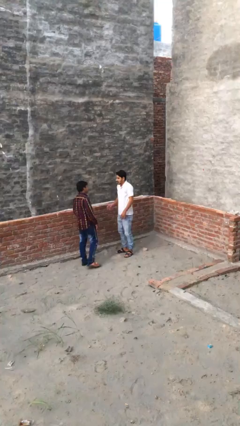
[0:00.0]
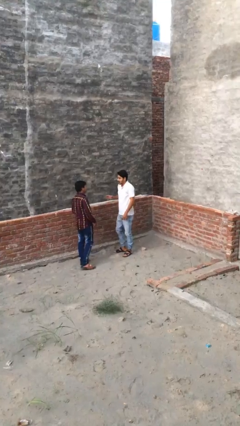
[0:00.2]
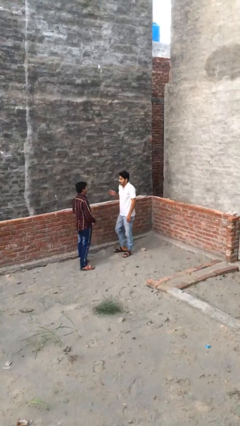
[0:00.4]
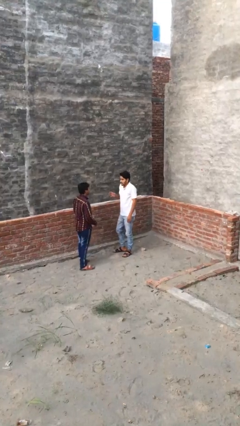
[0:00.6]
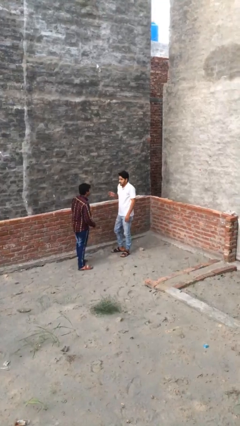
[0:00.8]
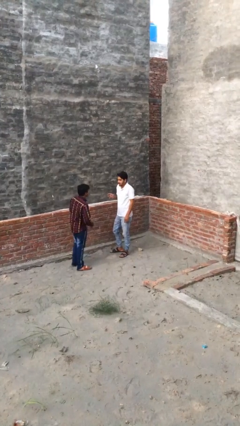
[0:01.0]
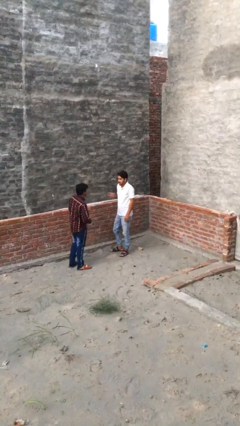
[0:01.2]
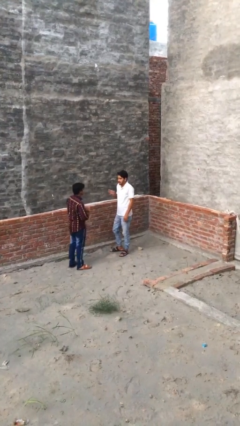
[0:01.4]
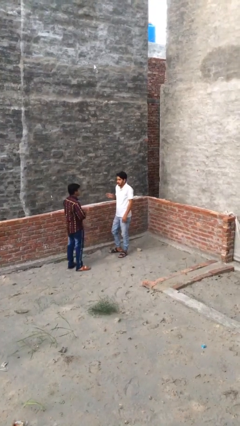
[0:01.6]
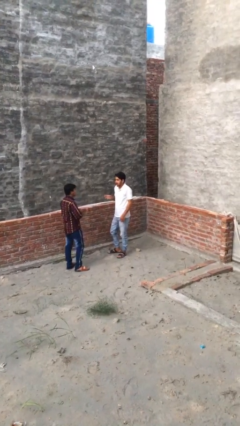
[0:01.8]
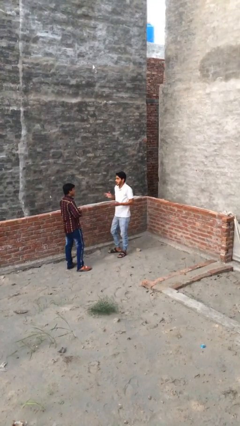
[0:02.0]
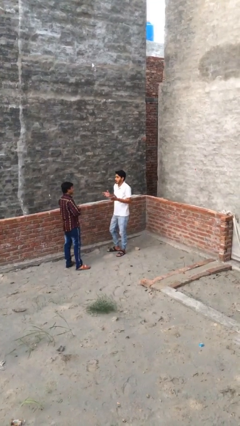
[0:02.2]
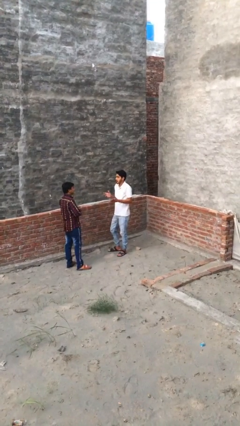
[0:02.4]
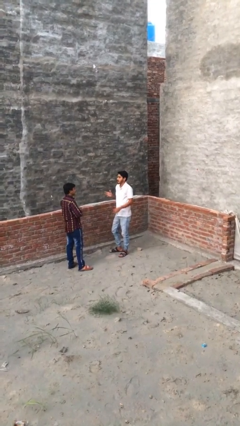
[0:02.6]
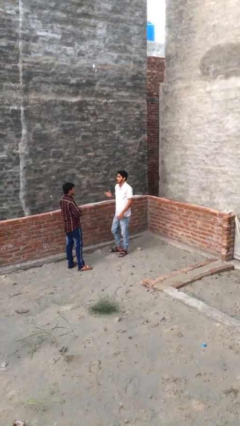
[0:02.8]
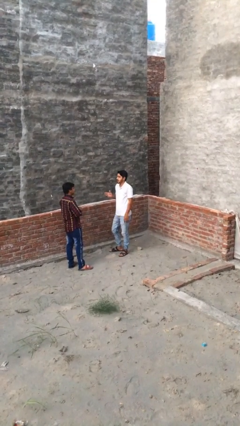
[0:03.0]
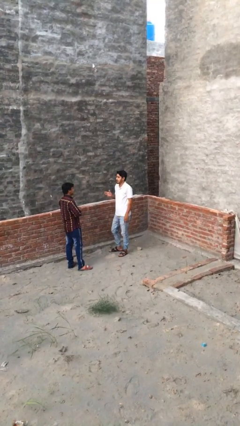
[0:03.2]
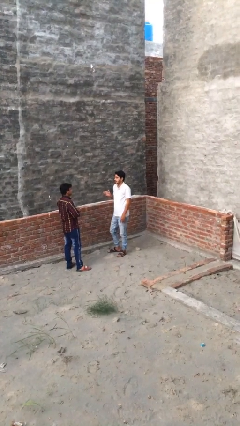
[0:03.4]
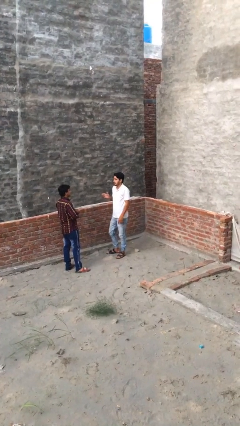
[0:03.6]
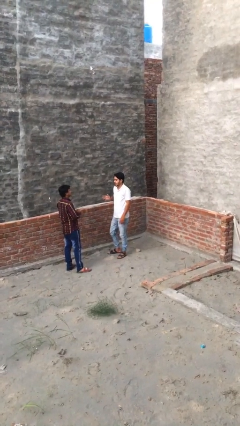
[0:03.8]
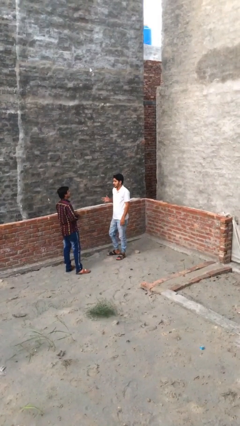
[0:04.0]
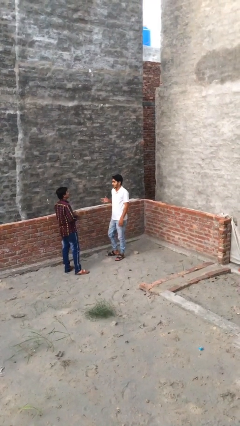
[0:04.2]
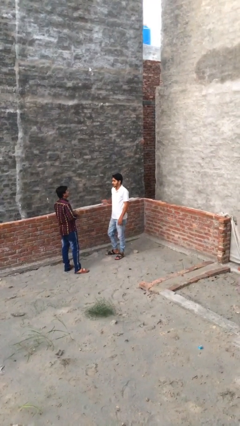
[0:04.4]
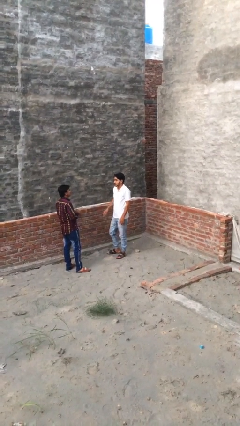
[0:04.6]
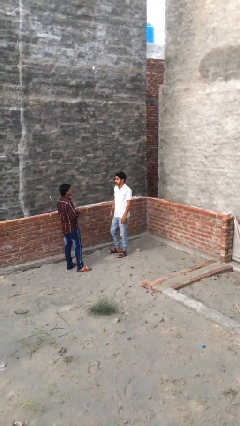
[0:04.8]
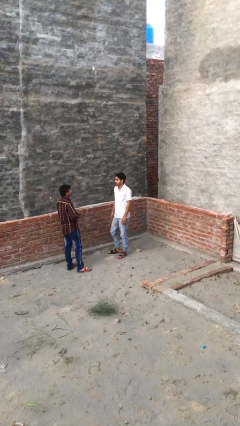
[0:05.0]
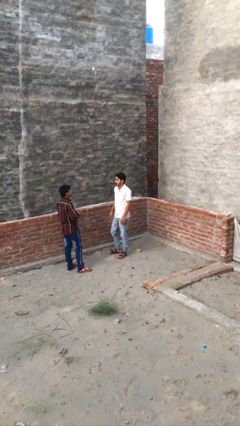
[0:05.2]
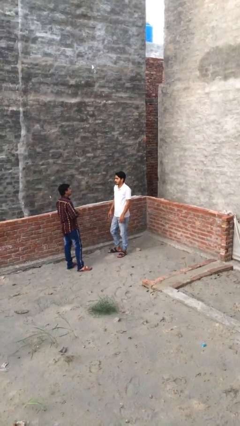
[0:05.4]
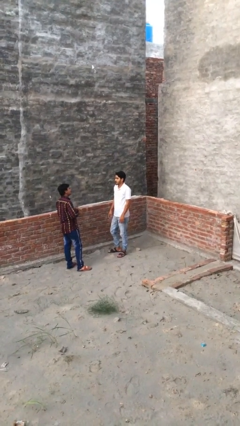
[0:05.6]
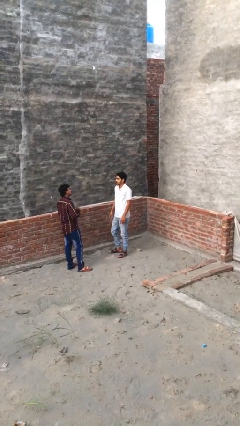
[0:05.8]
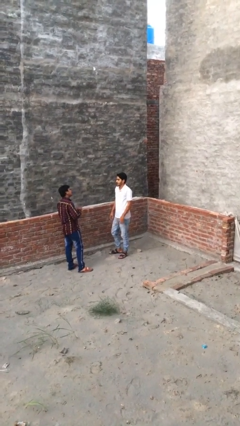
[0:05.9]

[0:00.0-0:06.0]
person talks to person

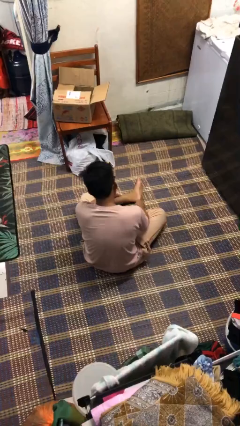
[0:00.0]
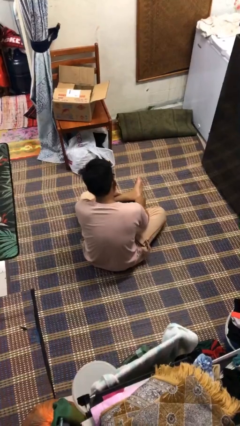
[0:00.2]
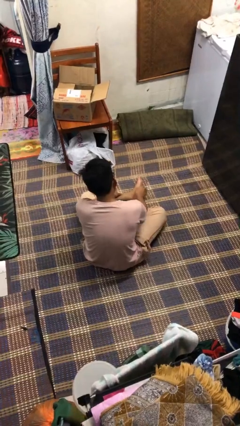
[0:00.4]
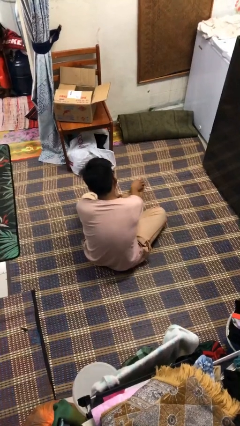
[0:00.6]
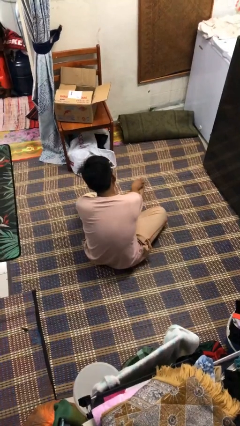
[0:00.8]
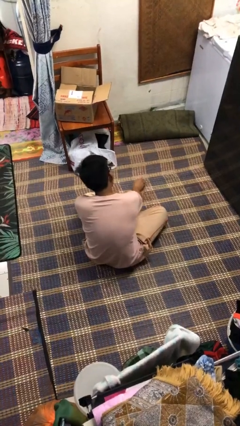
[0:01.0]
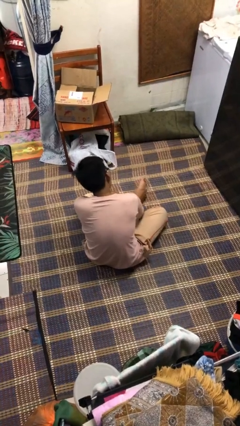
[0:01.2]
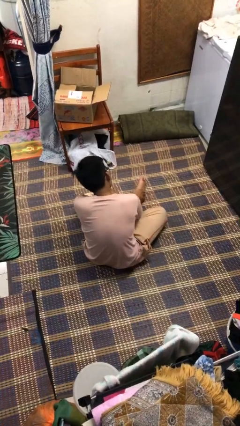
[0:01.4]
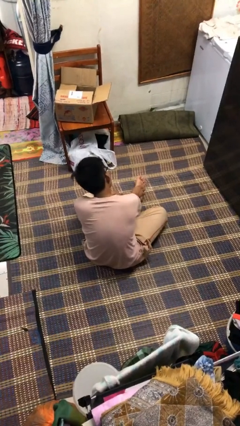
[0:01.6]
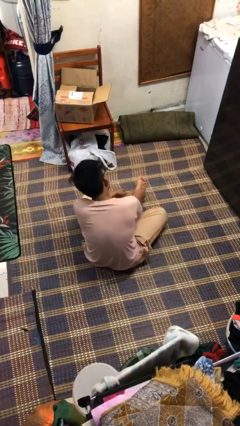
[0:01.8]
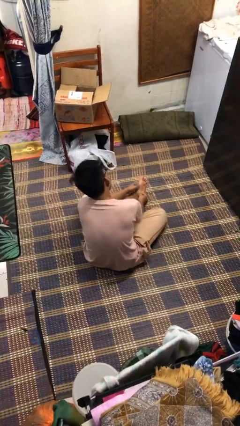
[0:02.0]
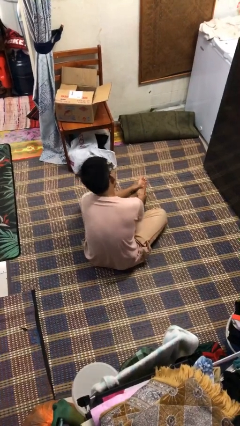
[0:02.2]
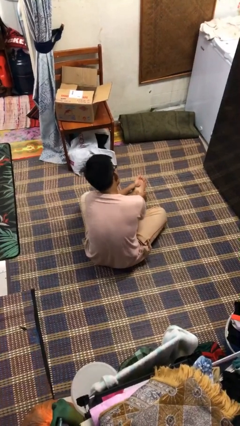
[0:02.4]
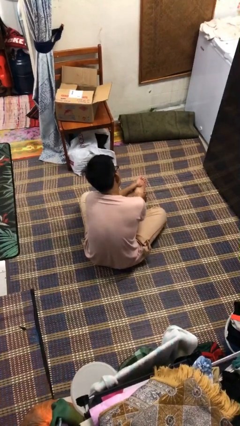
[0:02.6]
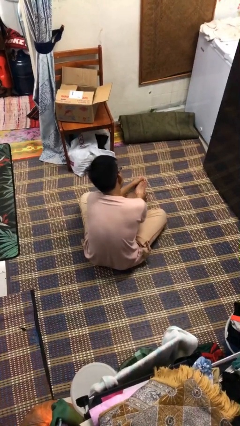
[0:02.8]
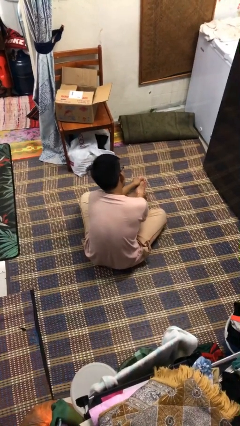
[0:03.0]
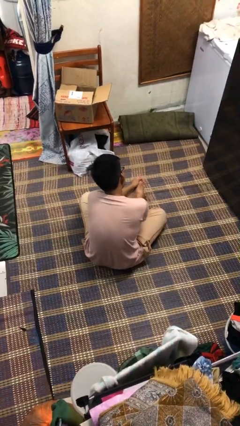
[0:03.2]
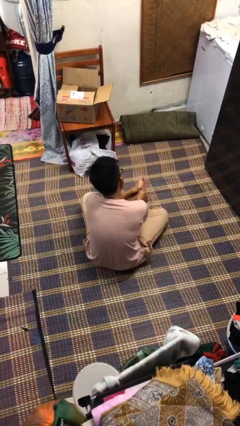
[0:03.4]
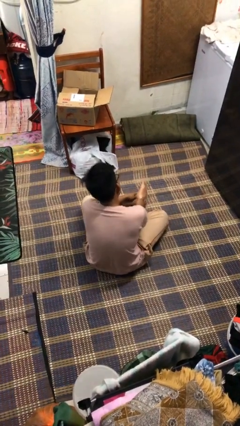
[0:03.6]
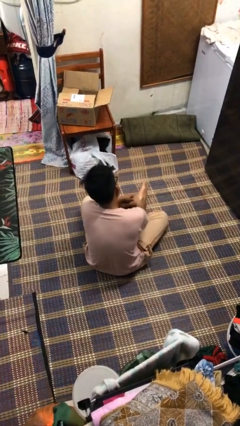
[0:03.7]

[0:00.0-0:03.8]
person rubs foot

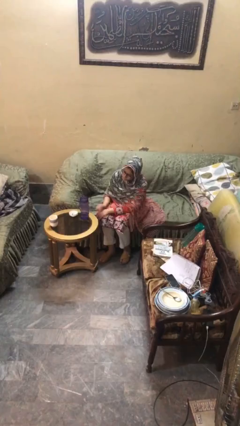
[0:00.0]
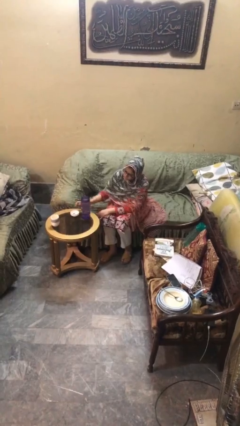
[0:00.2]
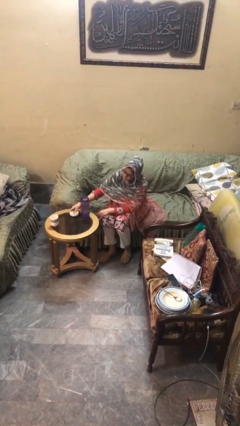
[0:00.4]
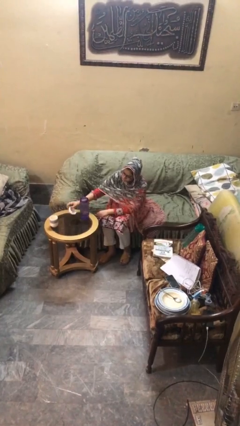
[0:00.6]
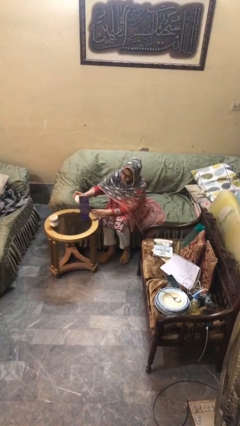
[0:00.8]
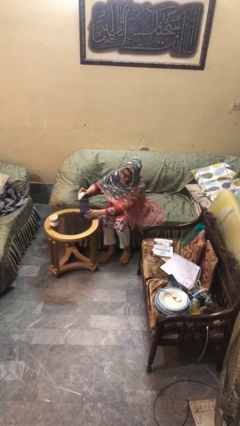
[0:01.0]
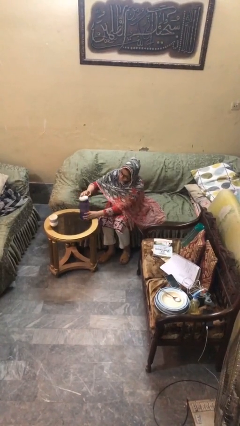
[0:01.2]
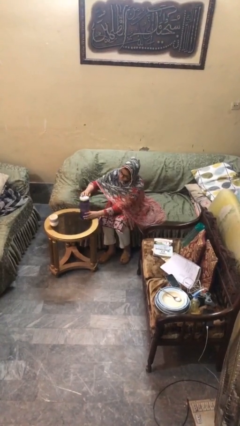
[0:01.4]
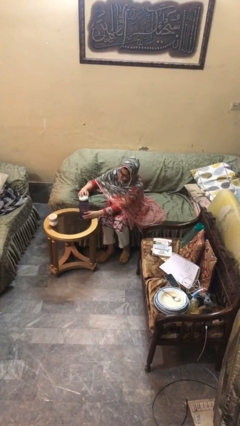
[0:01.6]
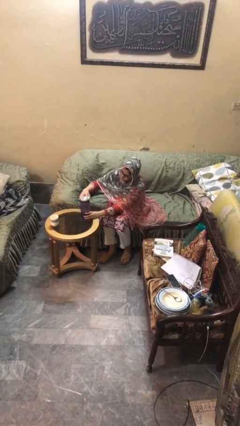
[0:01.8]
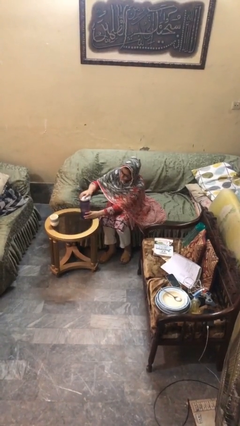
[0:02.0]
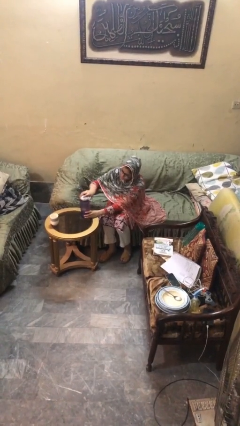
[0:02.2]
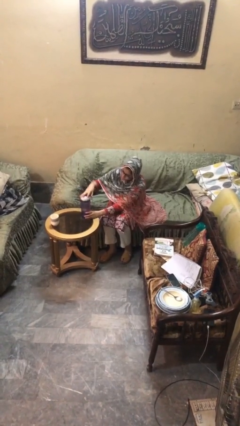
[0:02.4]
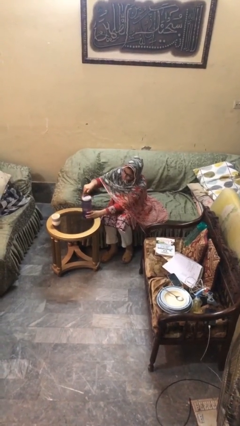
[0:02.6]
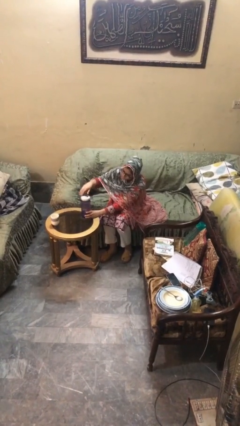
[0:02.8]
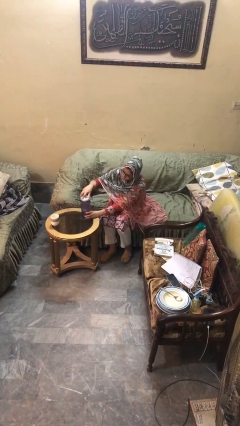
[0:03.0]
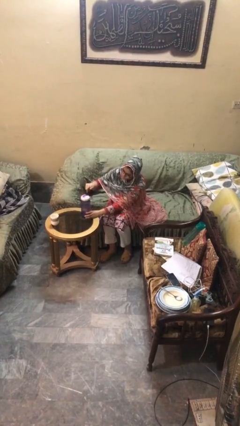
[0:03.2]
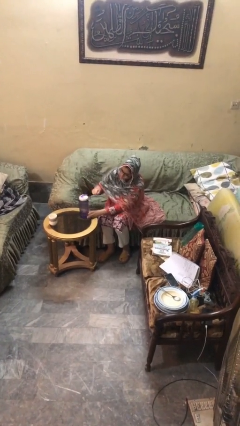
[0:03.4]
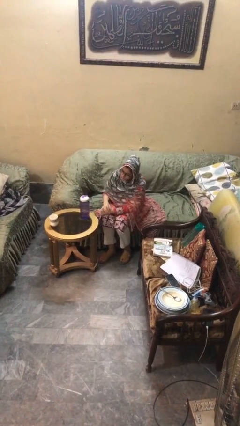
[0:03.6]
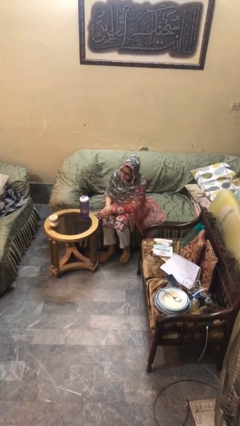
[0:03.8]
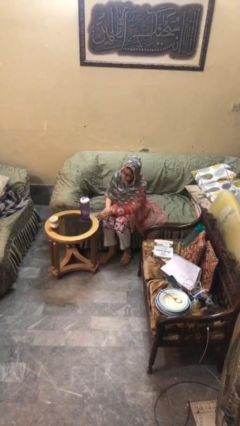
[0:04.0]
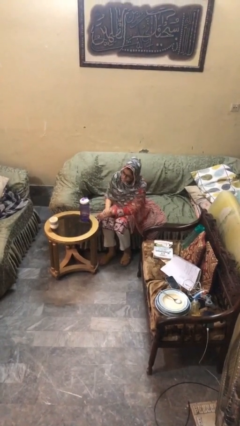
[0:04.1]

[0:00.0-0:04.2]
person screws lid to bottle

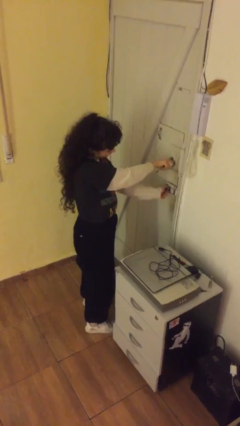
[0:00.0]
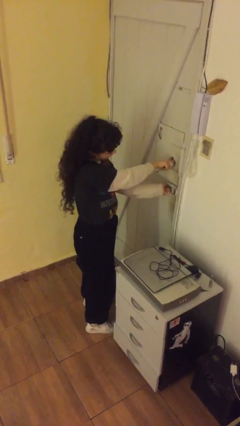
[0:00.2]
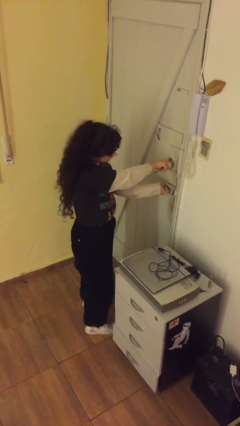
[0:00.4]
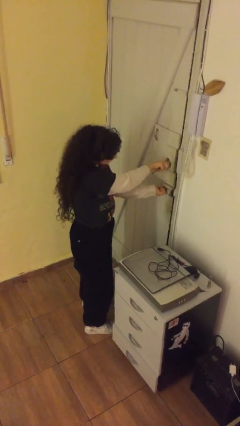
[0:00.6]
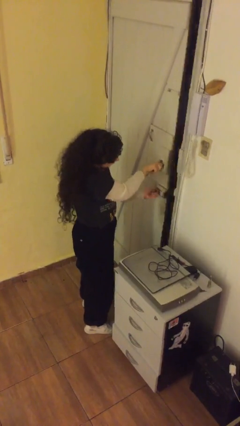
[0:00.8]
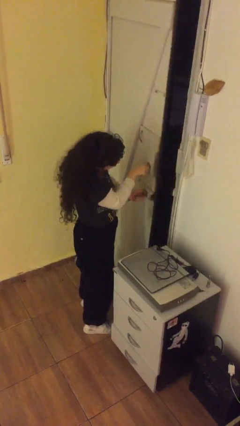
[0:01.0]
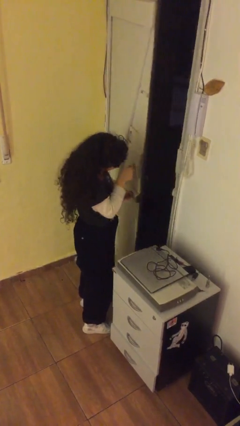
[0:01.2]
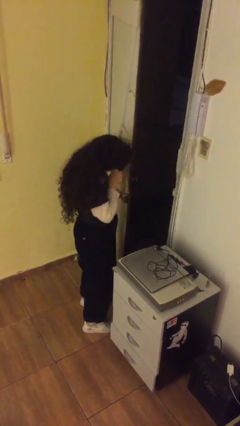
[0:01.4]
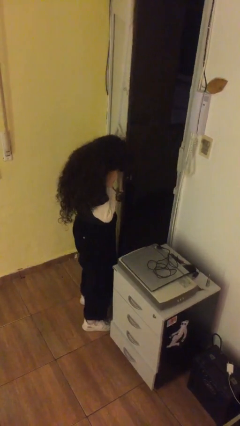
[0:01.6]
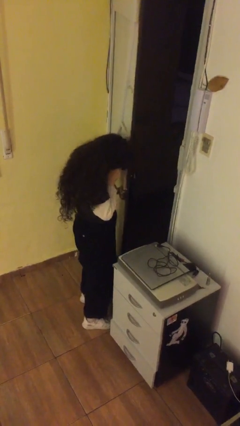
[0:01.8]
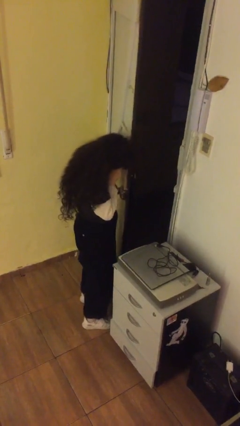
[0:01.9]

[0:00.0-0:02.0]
person opens facility door

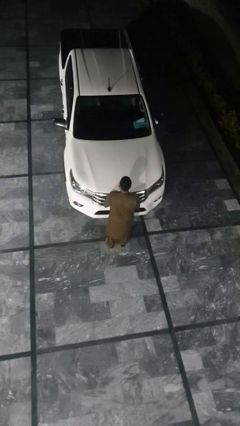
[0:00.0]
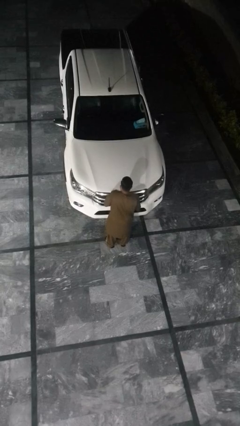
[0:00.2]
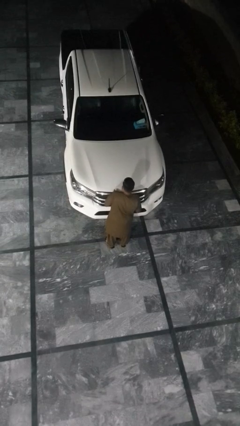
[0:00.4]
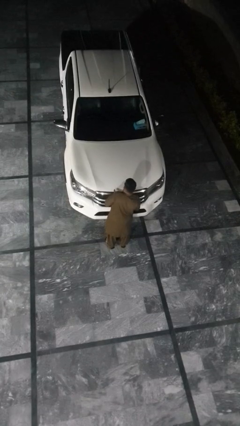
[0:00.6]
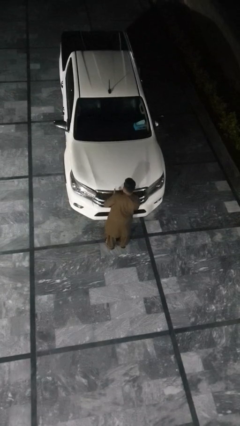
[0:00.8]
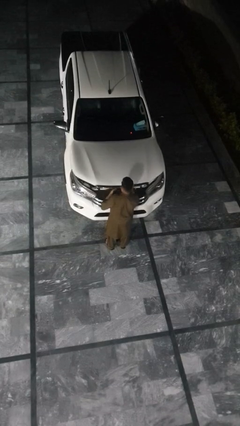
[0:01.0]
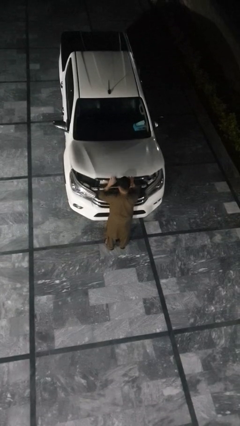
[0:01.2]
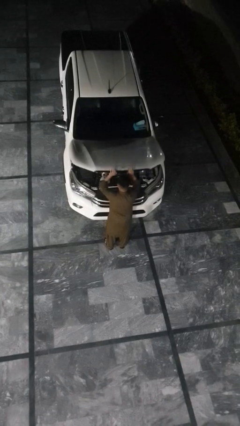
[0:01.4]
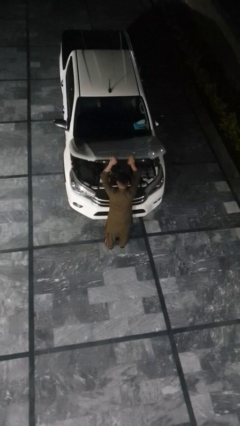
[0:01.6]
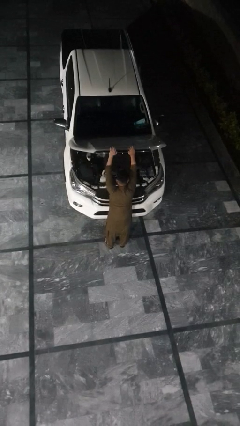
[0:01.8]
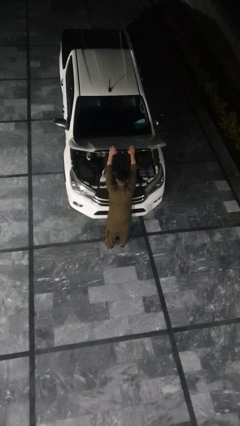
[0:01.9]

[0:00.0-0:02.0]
person opens car hood
